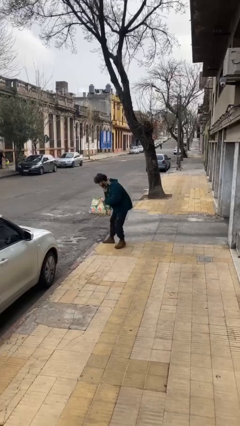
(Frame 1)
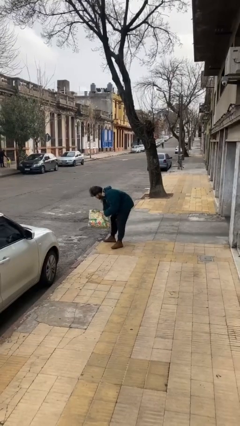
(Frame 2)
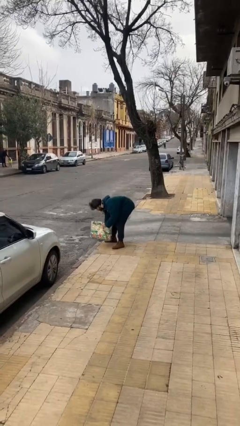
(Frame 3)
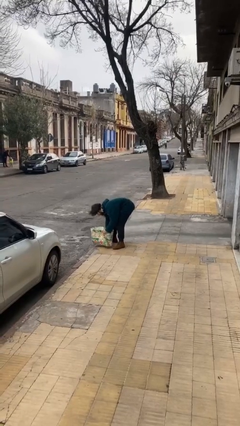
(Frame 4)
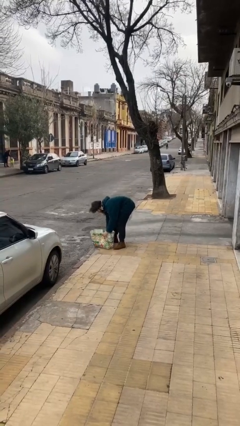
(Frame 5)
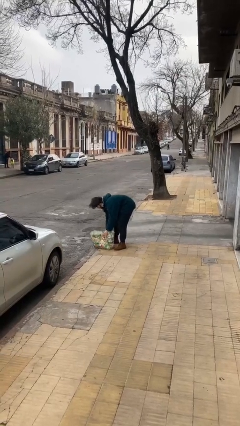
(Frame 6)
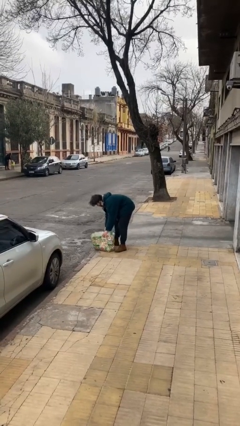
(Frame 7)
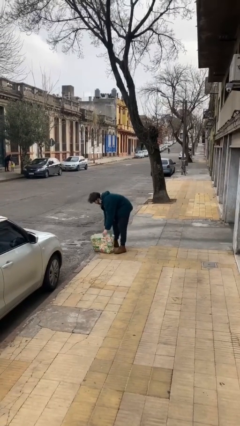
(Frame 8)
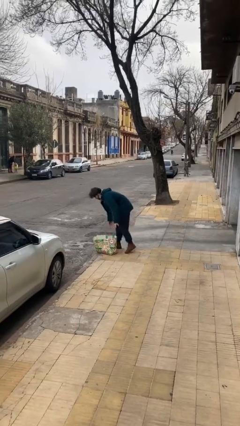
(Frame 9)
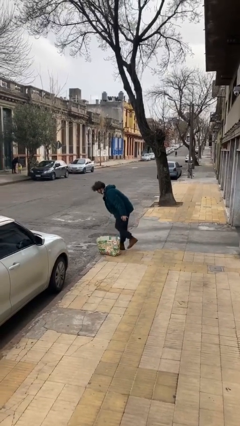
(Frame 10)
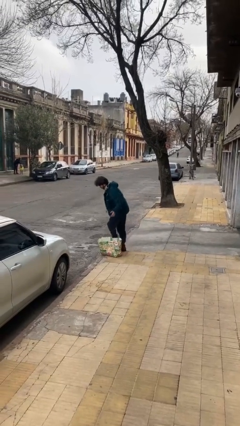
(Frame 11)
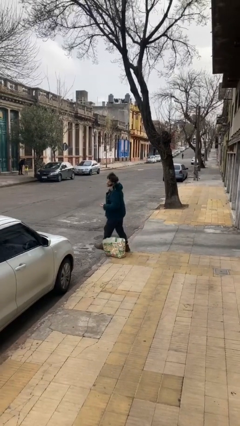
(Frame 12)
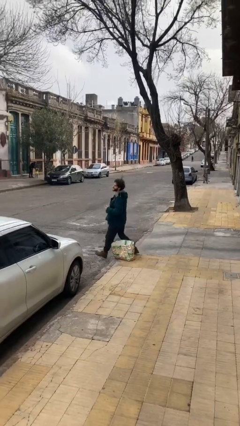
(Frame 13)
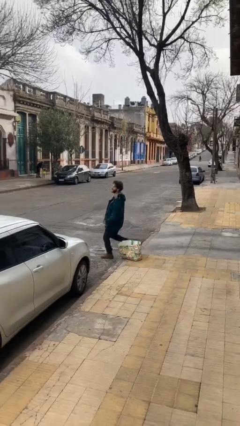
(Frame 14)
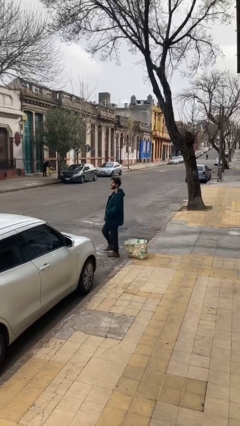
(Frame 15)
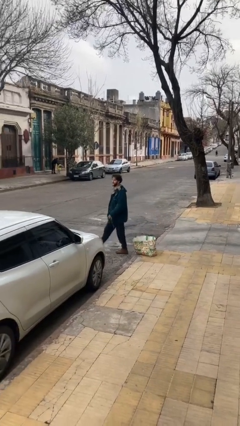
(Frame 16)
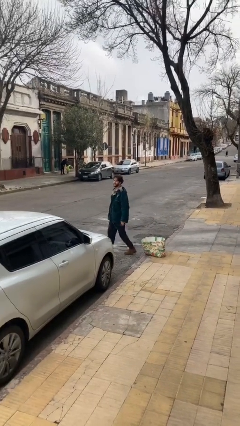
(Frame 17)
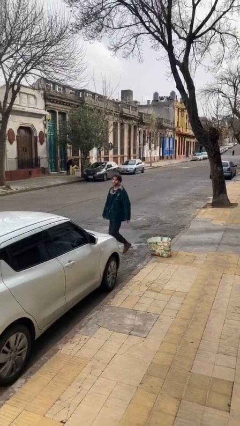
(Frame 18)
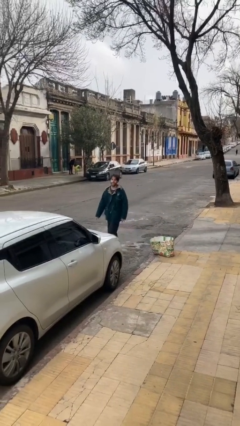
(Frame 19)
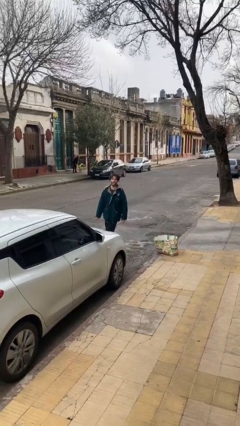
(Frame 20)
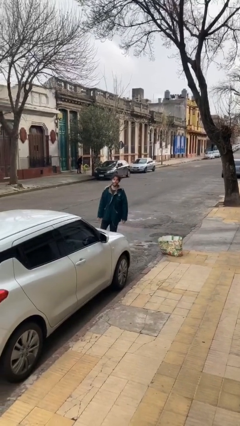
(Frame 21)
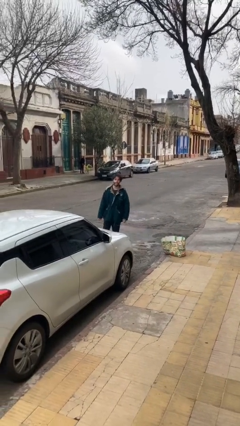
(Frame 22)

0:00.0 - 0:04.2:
person puts down object on floor

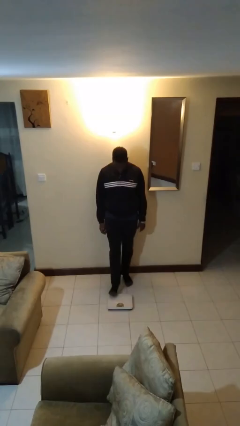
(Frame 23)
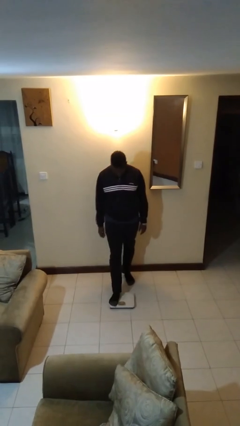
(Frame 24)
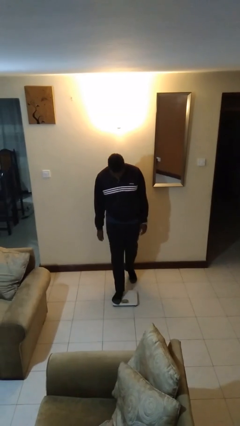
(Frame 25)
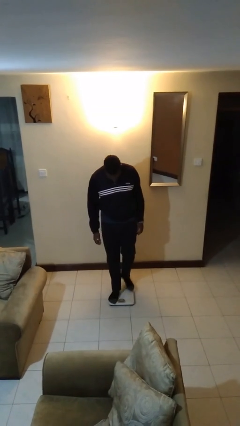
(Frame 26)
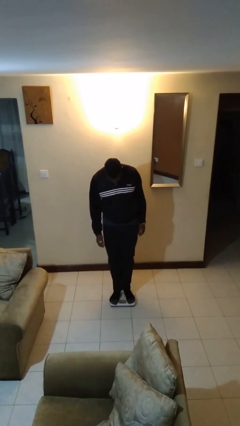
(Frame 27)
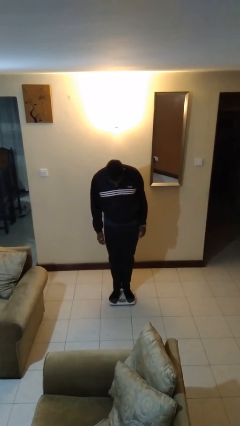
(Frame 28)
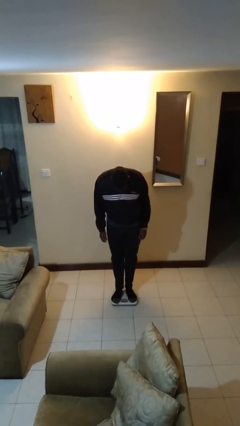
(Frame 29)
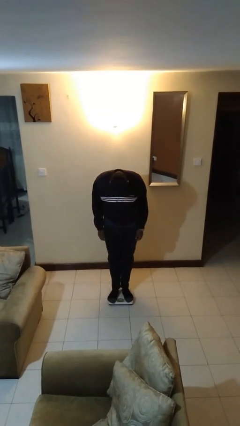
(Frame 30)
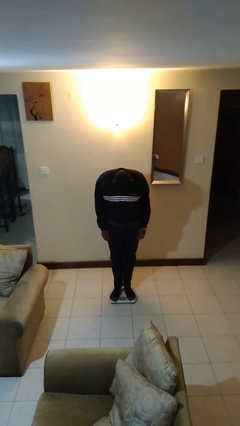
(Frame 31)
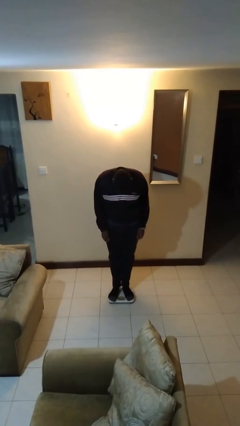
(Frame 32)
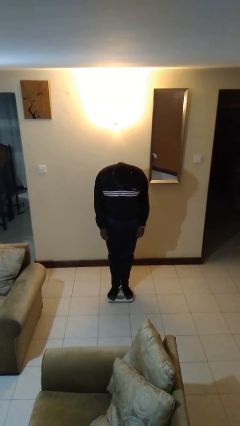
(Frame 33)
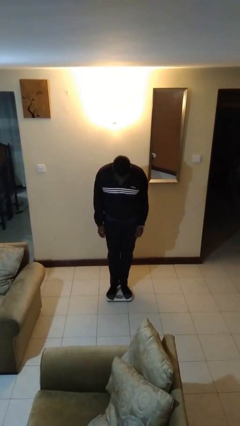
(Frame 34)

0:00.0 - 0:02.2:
person uses bodyweight scale

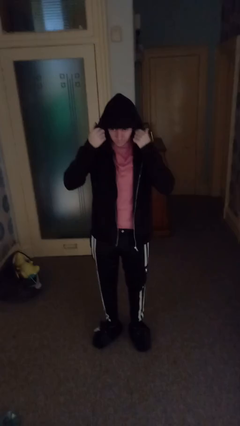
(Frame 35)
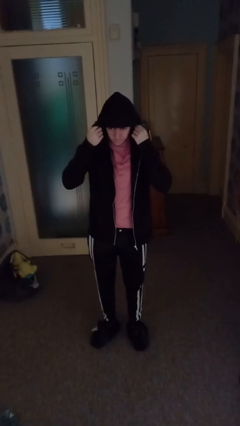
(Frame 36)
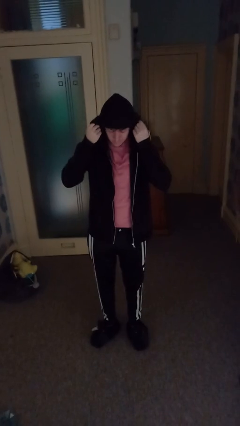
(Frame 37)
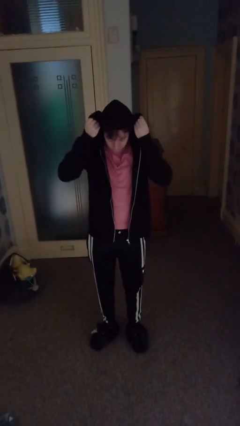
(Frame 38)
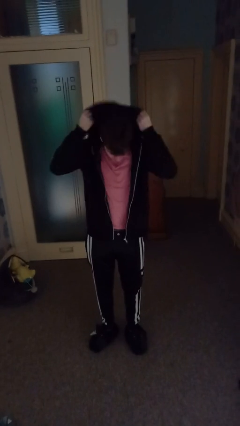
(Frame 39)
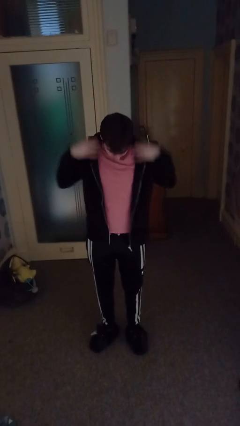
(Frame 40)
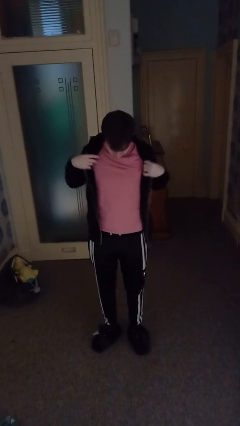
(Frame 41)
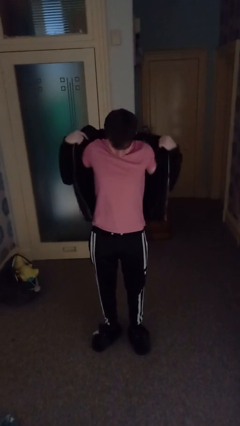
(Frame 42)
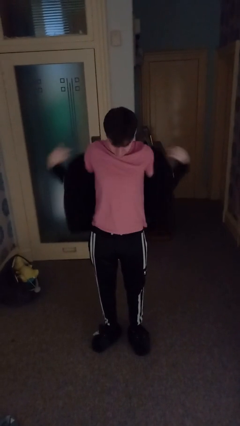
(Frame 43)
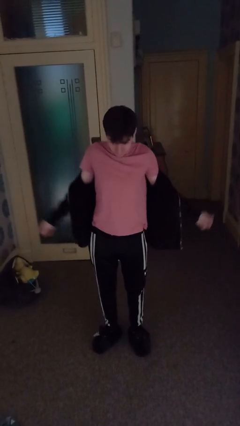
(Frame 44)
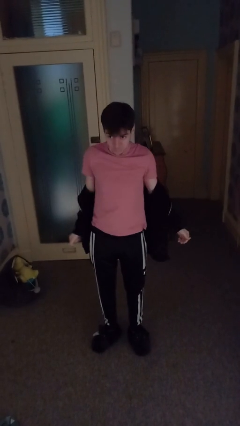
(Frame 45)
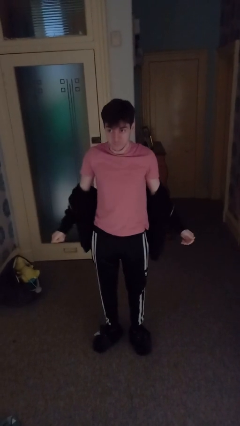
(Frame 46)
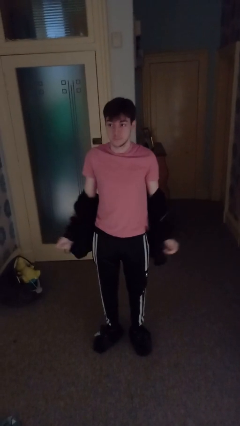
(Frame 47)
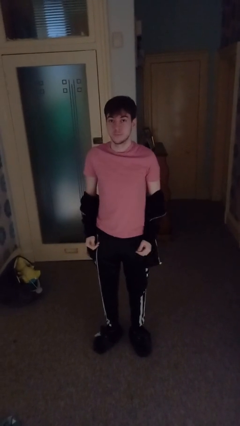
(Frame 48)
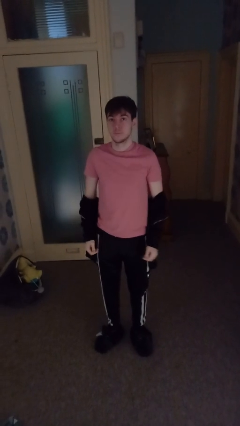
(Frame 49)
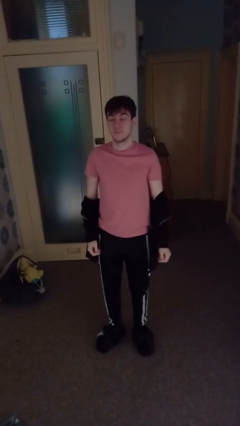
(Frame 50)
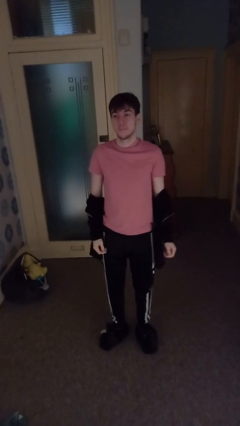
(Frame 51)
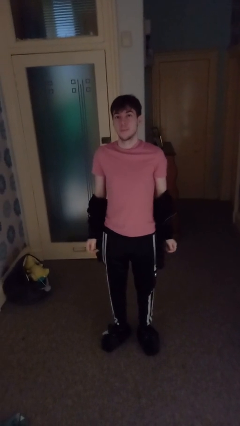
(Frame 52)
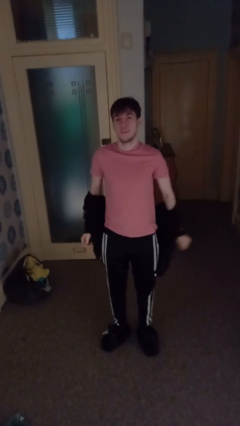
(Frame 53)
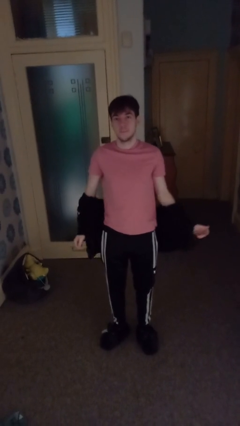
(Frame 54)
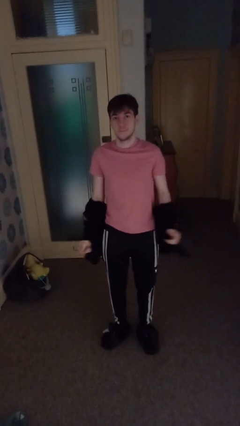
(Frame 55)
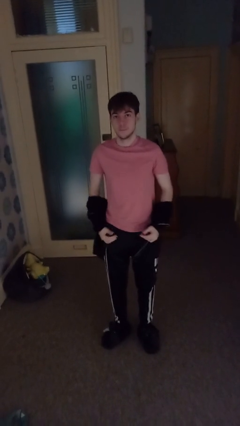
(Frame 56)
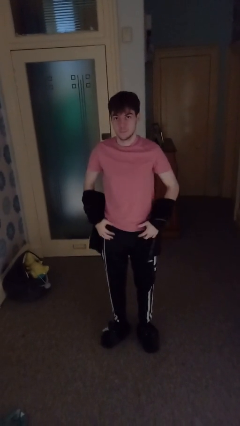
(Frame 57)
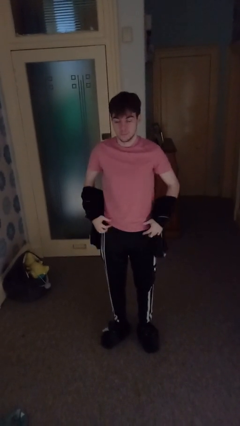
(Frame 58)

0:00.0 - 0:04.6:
person takes off hoodie

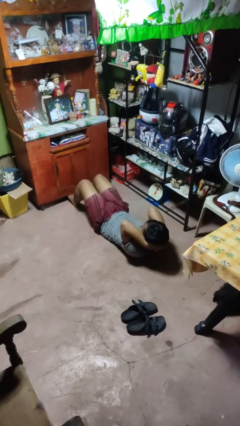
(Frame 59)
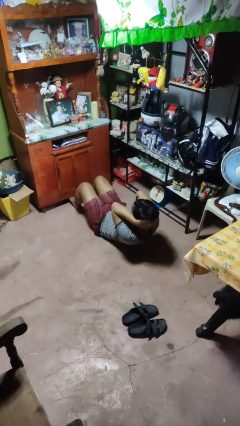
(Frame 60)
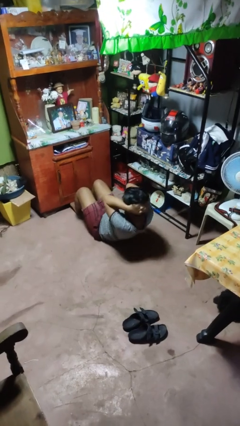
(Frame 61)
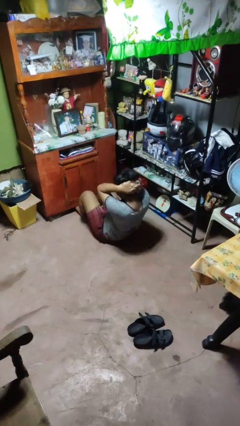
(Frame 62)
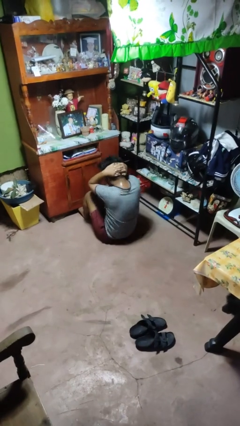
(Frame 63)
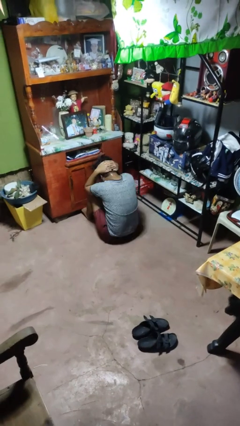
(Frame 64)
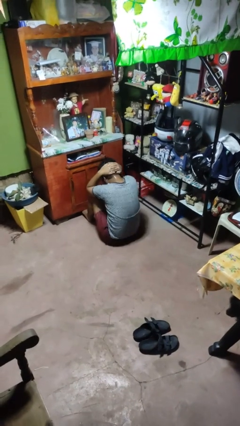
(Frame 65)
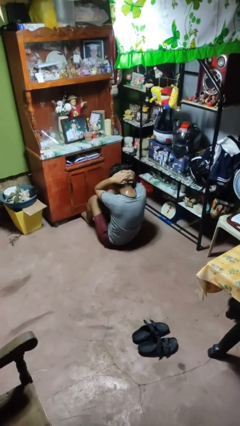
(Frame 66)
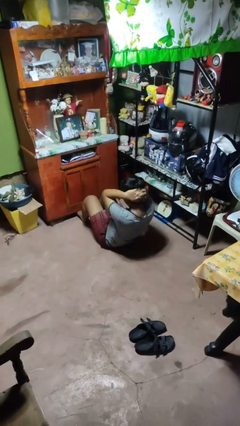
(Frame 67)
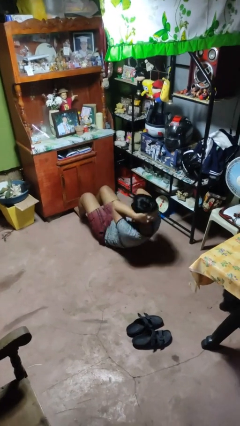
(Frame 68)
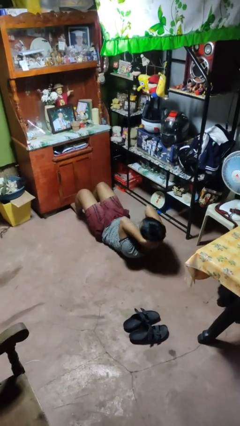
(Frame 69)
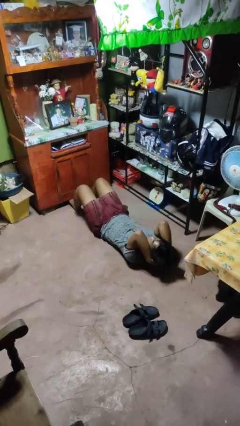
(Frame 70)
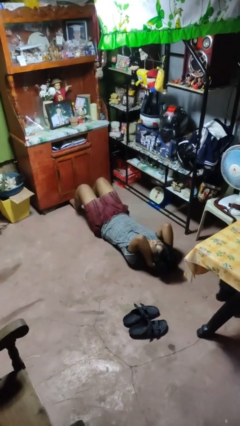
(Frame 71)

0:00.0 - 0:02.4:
person exercises with situp

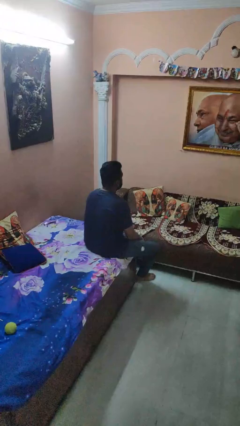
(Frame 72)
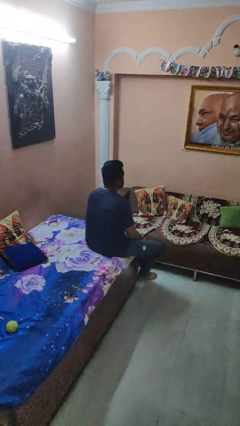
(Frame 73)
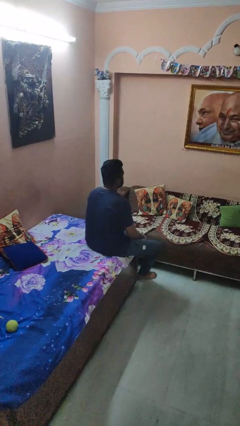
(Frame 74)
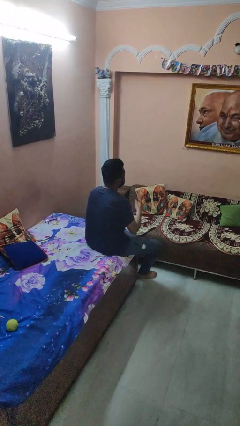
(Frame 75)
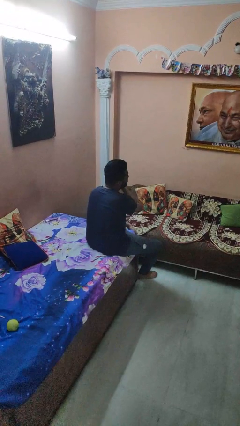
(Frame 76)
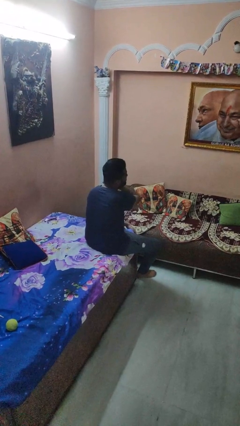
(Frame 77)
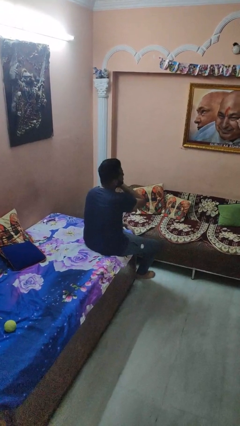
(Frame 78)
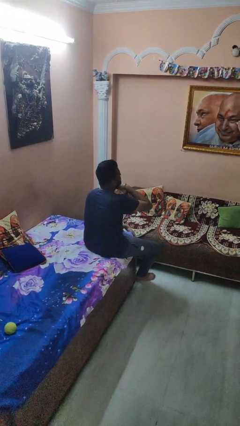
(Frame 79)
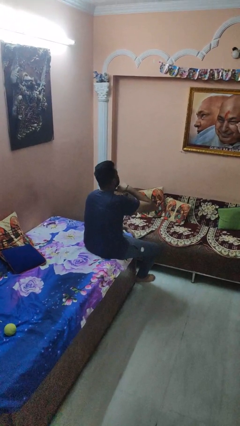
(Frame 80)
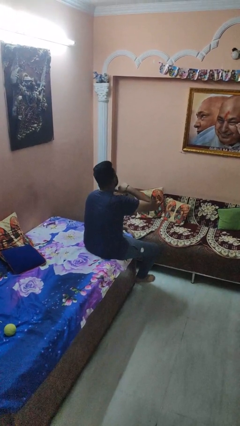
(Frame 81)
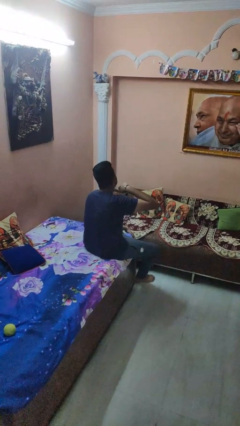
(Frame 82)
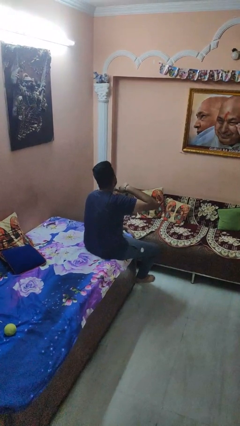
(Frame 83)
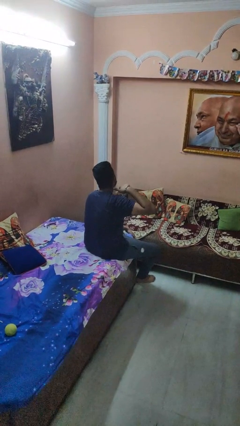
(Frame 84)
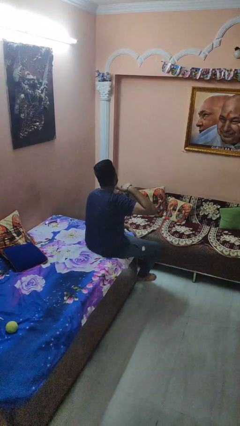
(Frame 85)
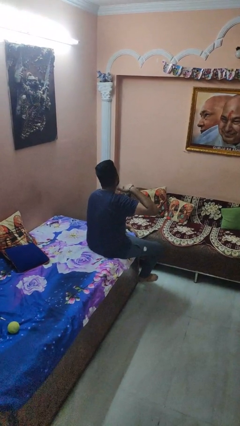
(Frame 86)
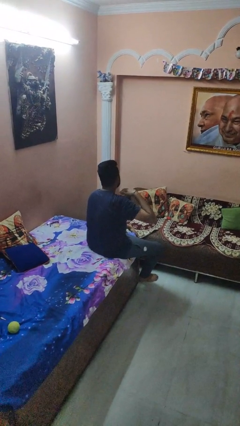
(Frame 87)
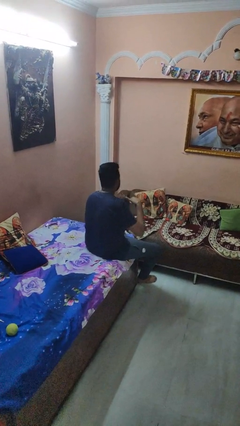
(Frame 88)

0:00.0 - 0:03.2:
person gestures cut

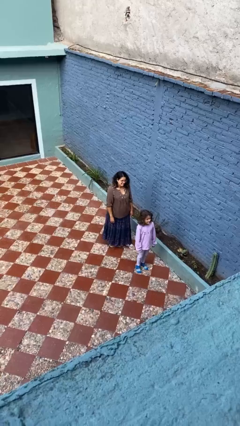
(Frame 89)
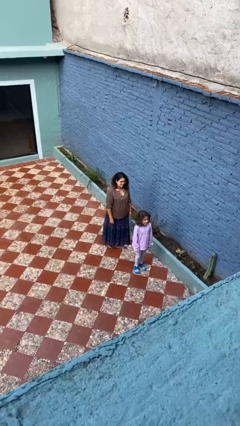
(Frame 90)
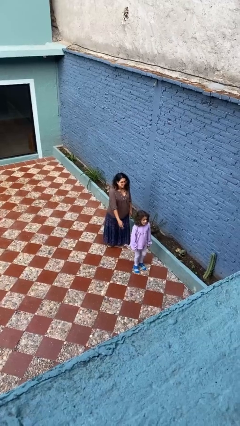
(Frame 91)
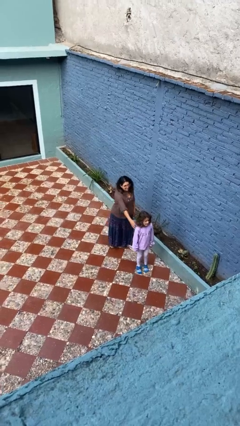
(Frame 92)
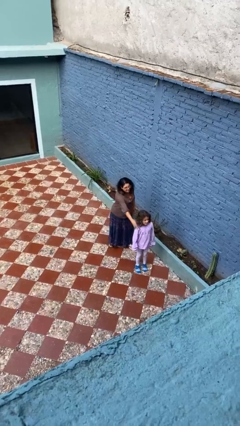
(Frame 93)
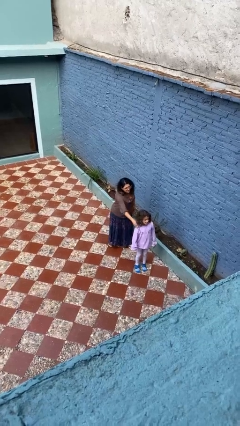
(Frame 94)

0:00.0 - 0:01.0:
person grabs person by shoulder
